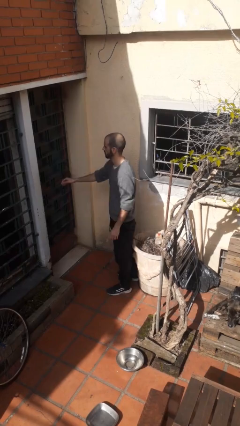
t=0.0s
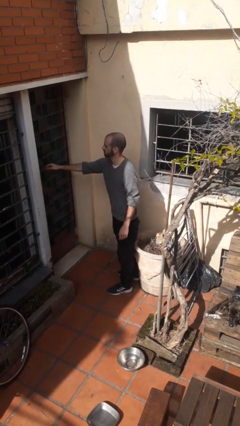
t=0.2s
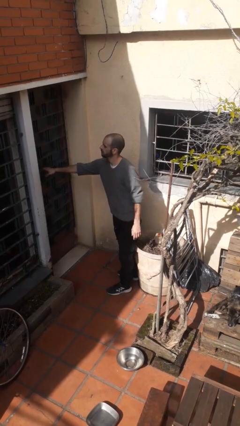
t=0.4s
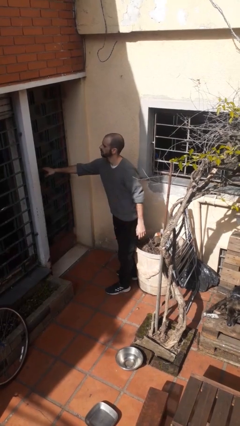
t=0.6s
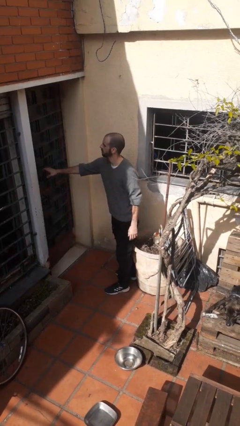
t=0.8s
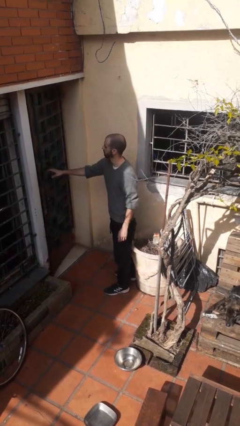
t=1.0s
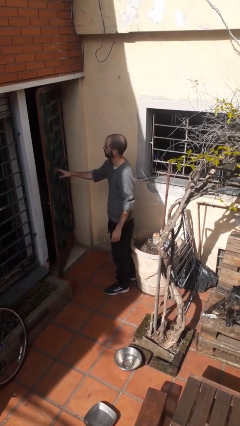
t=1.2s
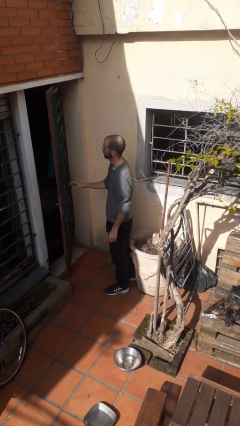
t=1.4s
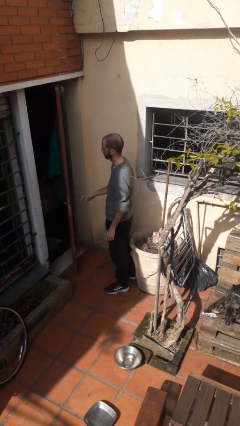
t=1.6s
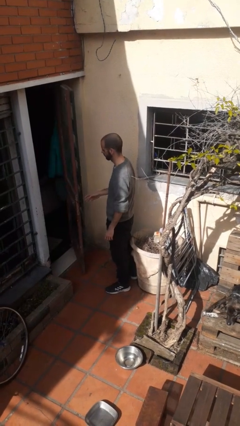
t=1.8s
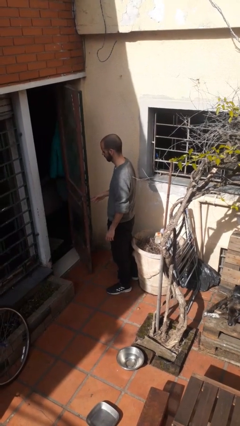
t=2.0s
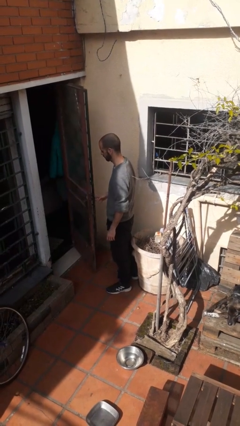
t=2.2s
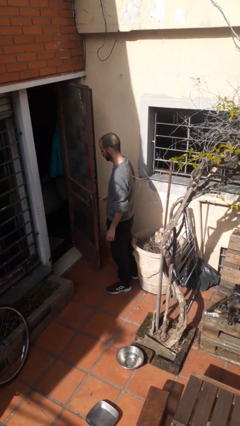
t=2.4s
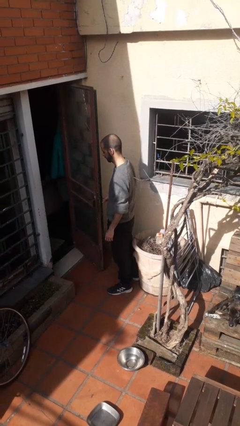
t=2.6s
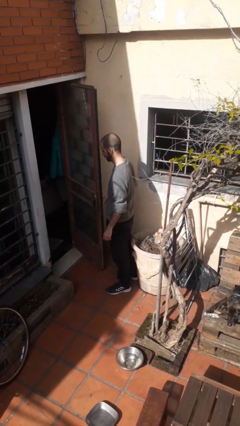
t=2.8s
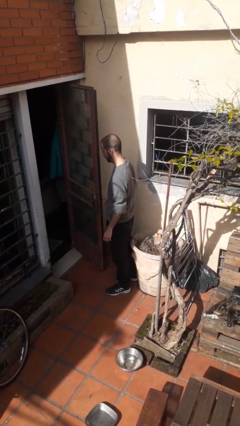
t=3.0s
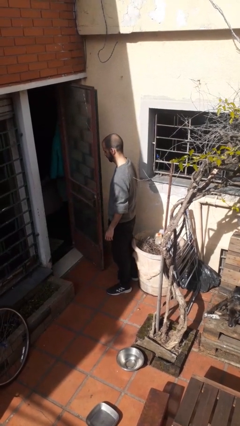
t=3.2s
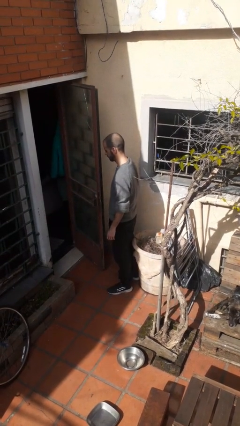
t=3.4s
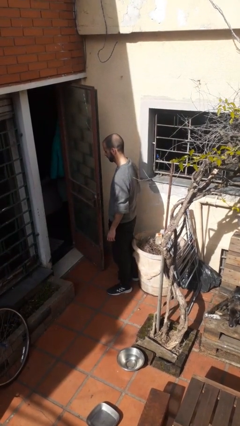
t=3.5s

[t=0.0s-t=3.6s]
person opens facility door

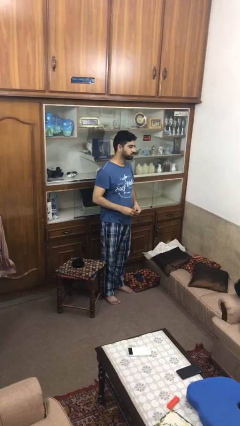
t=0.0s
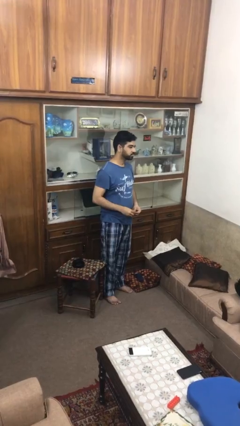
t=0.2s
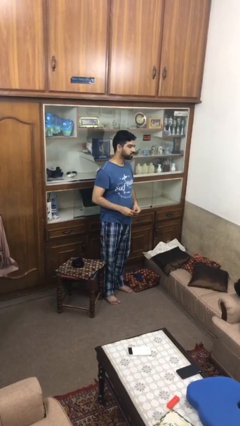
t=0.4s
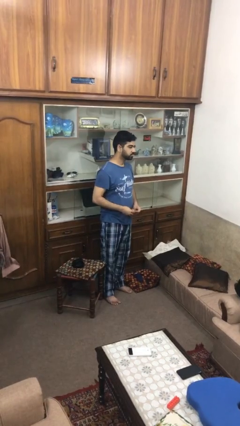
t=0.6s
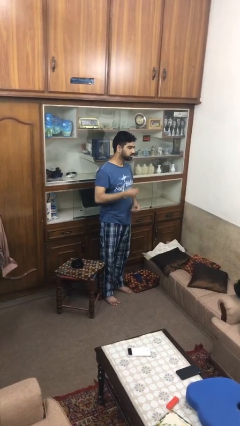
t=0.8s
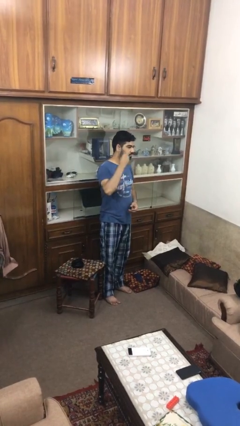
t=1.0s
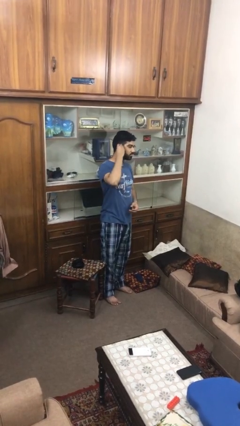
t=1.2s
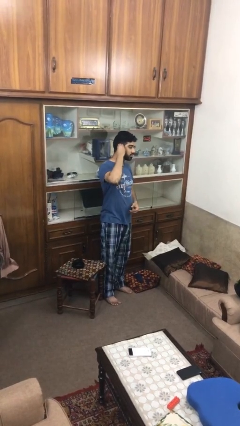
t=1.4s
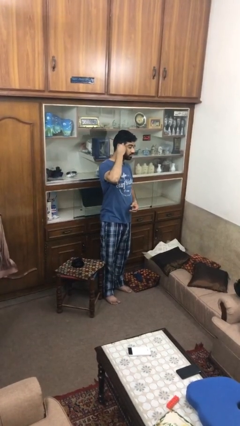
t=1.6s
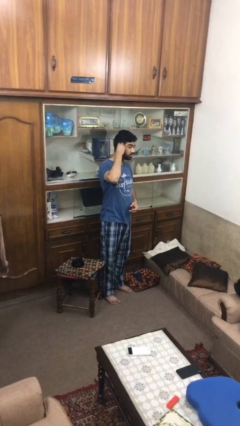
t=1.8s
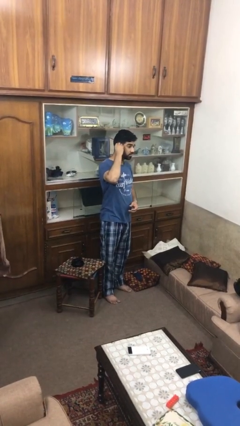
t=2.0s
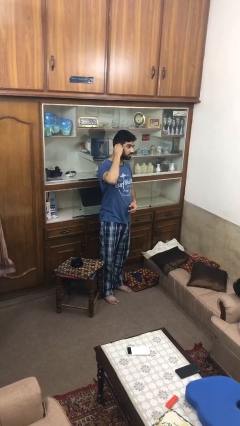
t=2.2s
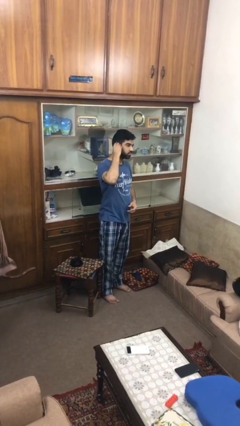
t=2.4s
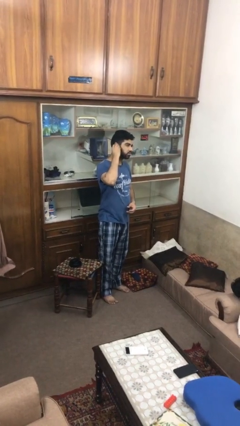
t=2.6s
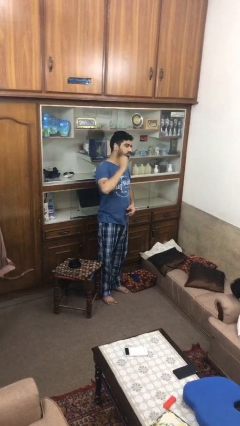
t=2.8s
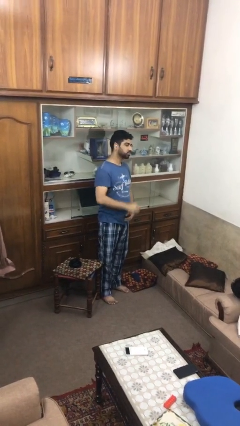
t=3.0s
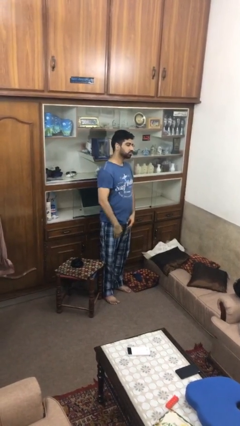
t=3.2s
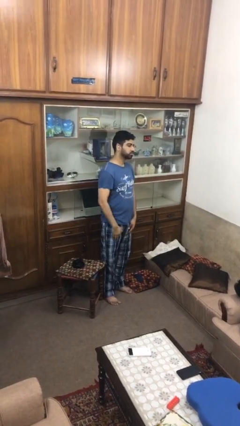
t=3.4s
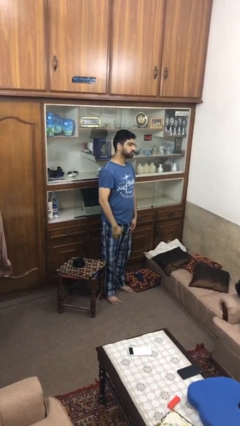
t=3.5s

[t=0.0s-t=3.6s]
person puts on earrings

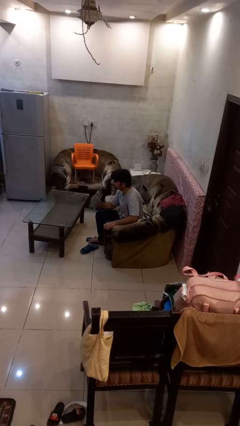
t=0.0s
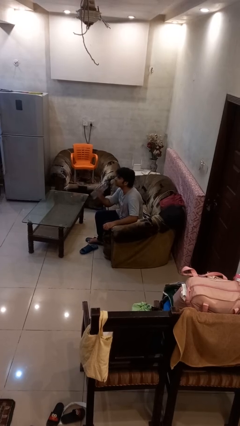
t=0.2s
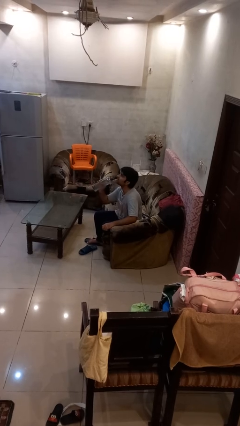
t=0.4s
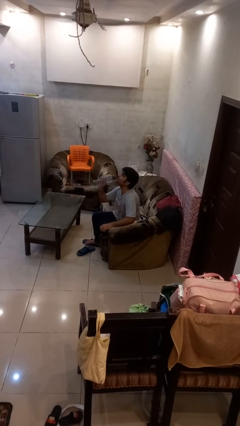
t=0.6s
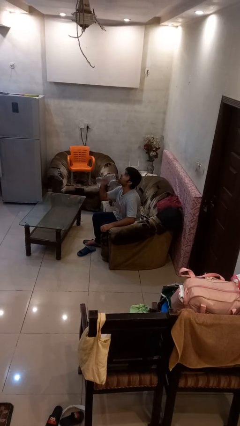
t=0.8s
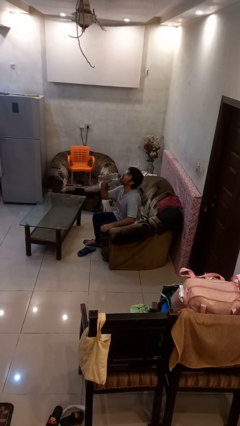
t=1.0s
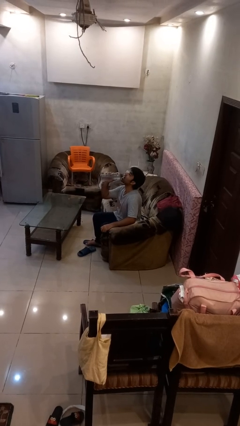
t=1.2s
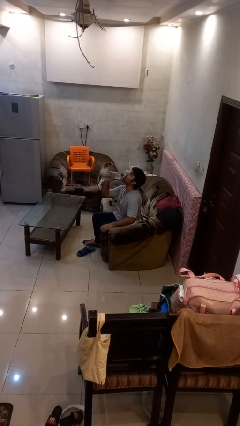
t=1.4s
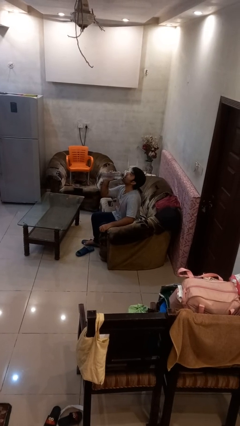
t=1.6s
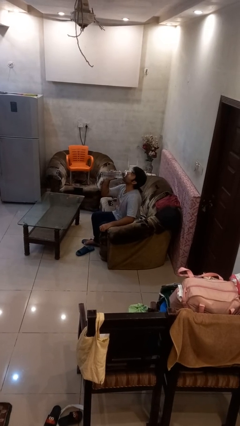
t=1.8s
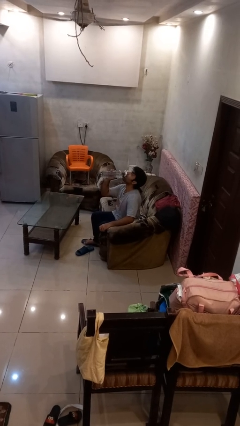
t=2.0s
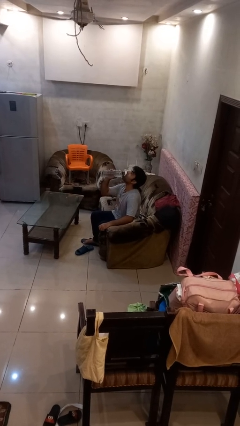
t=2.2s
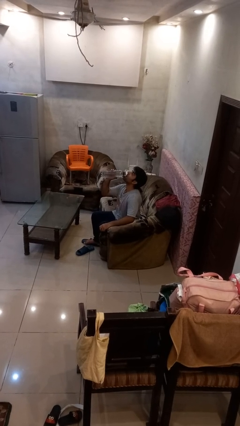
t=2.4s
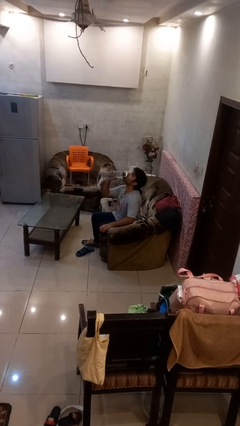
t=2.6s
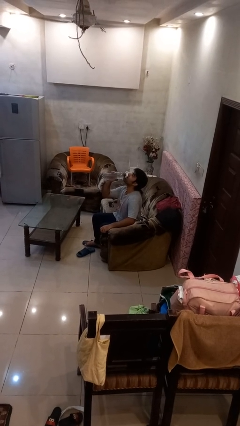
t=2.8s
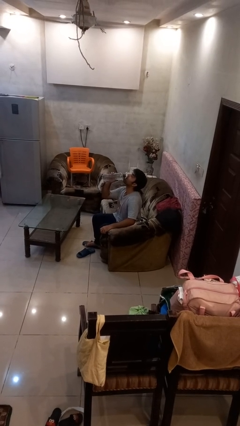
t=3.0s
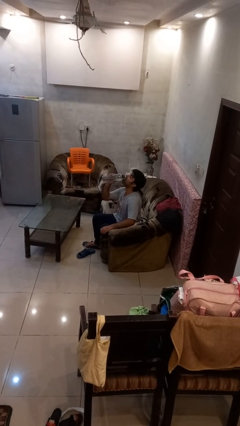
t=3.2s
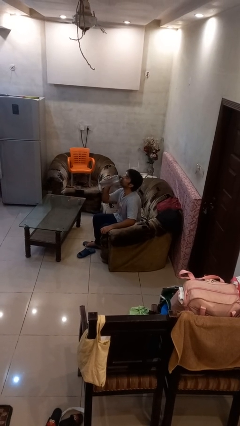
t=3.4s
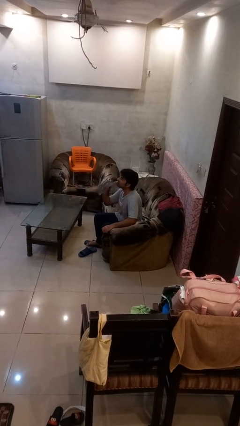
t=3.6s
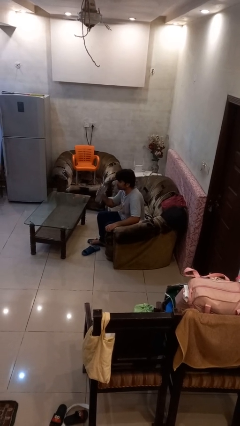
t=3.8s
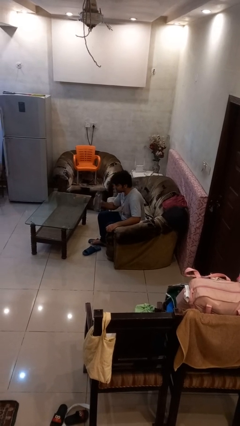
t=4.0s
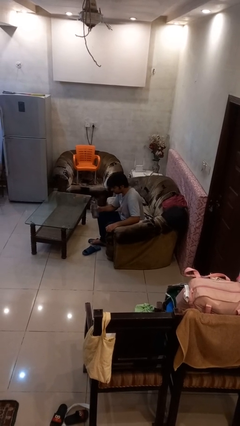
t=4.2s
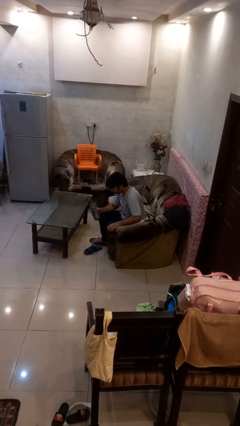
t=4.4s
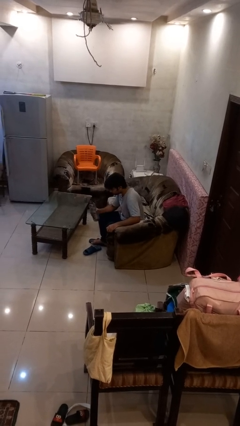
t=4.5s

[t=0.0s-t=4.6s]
person drinks from bottle

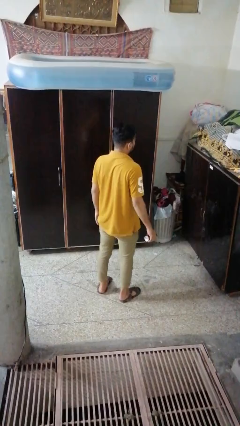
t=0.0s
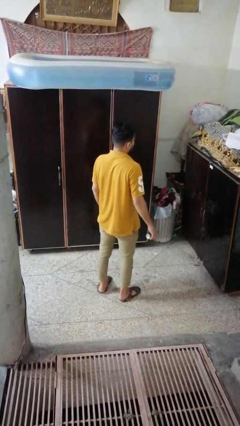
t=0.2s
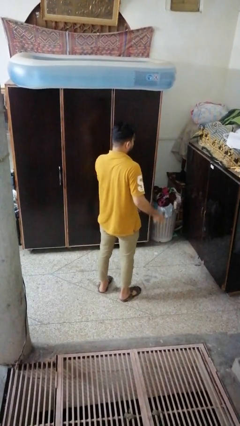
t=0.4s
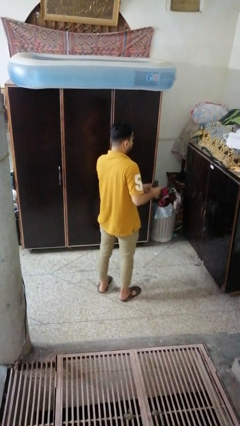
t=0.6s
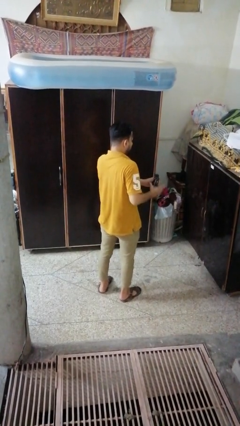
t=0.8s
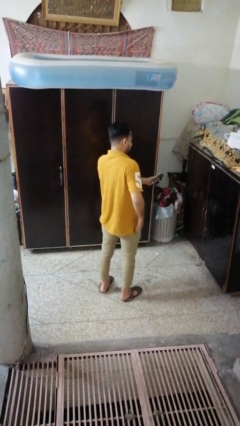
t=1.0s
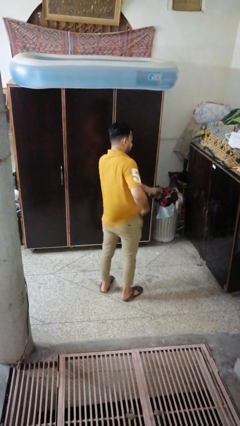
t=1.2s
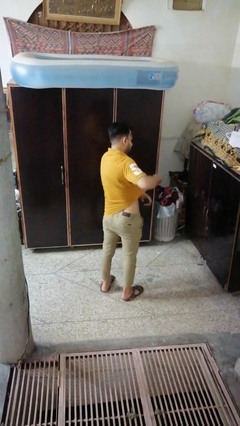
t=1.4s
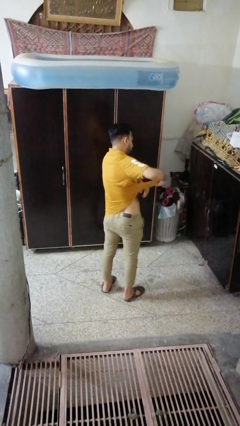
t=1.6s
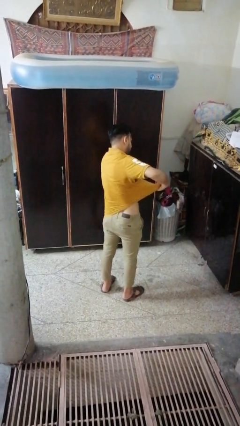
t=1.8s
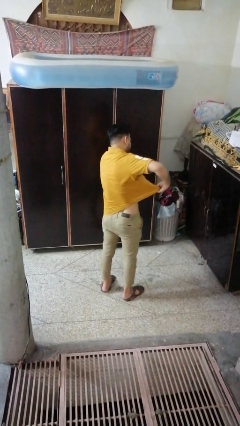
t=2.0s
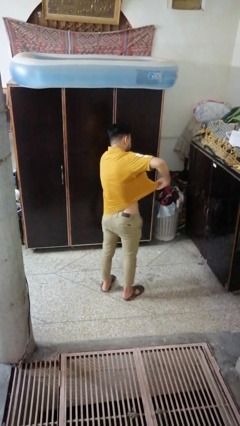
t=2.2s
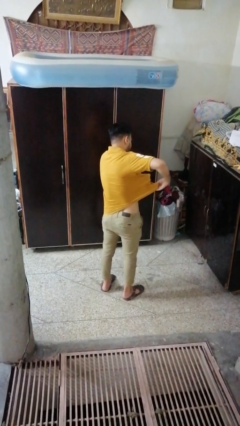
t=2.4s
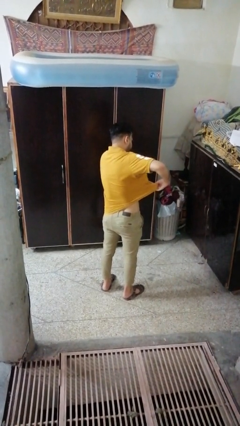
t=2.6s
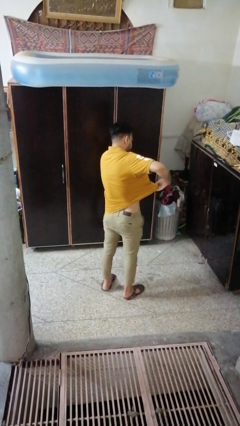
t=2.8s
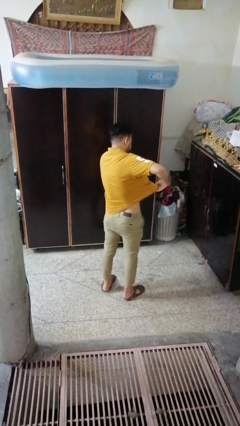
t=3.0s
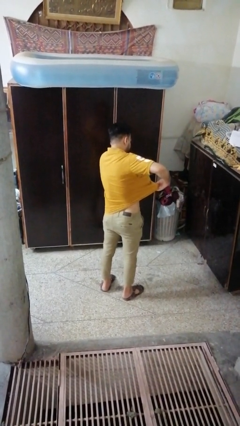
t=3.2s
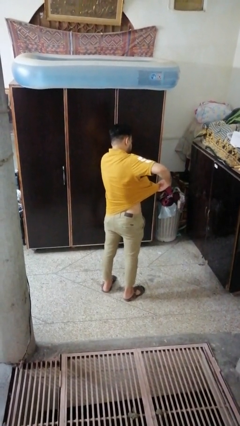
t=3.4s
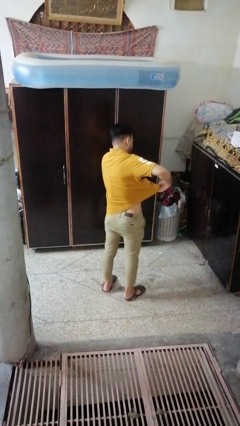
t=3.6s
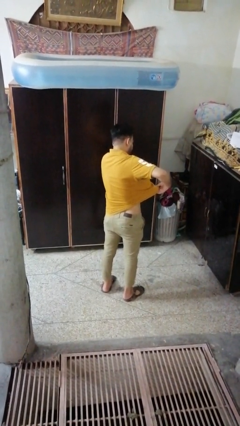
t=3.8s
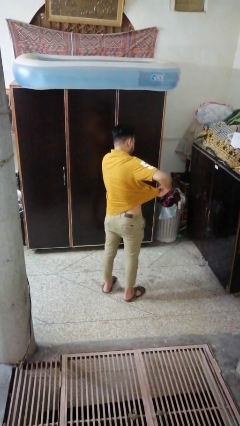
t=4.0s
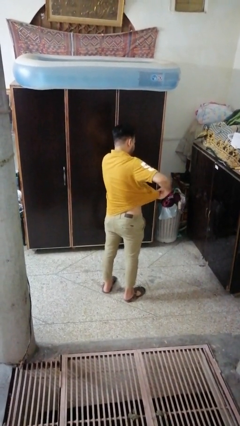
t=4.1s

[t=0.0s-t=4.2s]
person applies deodorant

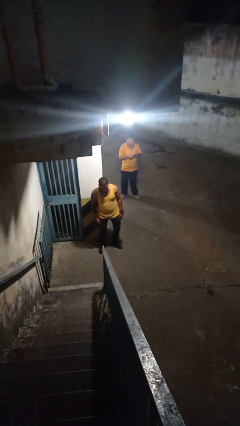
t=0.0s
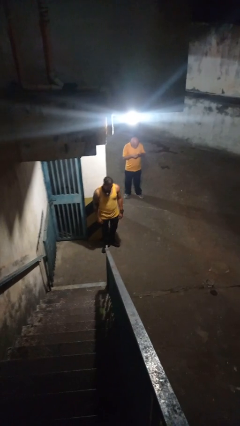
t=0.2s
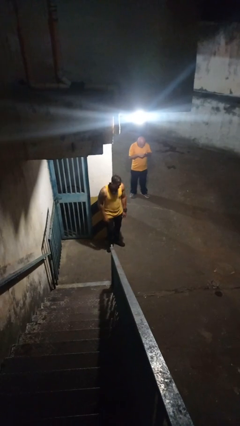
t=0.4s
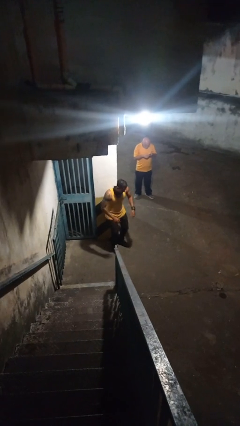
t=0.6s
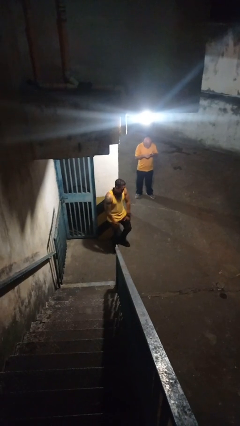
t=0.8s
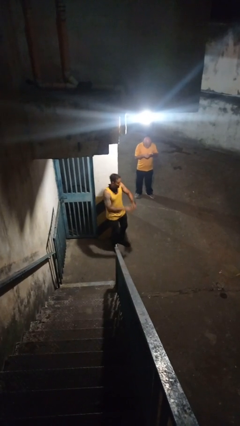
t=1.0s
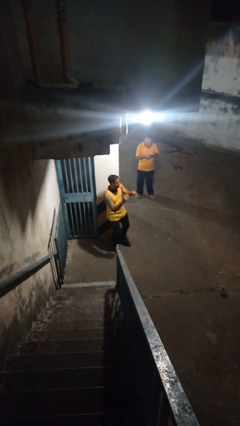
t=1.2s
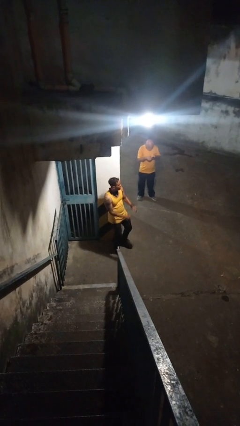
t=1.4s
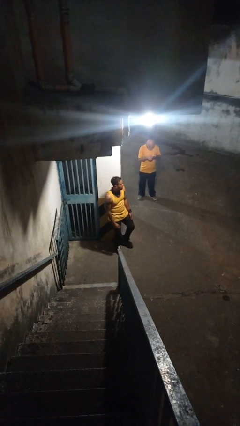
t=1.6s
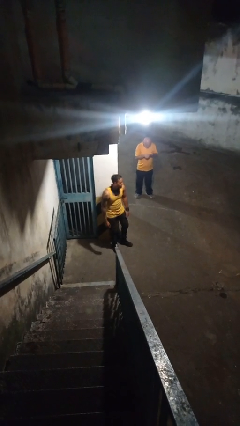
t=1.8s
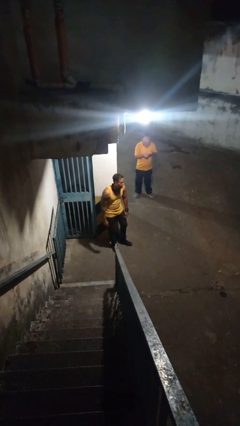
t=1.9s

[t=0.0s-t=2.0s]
person slaps hands on thighs
